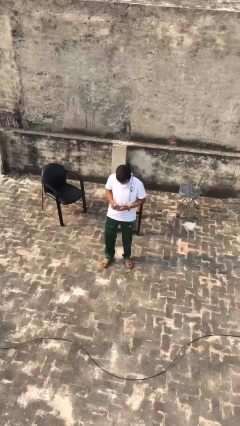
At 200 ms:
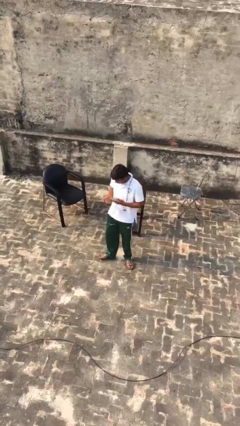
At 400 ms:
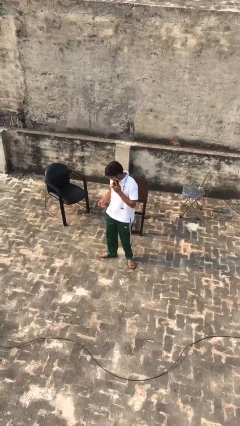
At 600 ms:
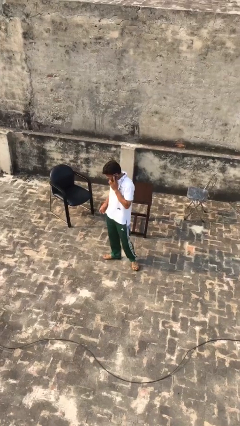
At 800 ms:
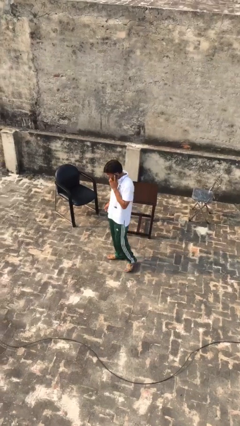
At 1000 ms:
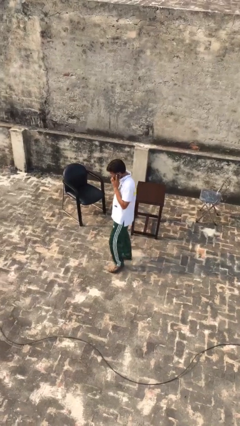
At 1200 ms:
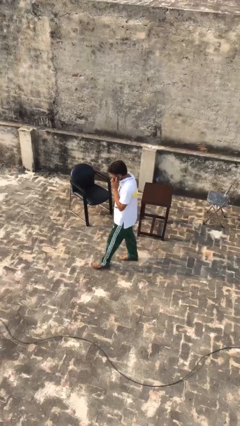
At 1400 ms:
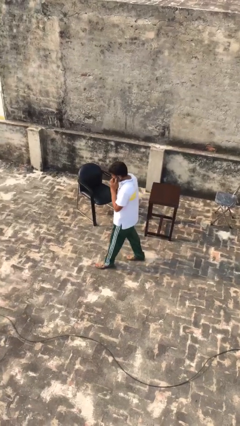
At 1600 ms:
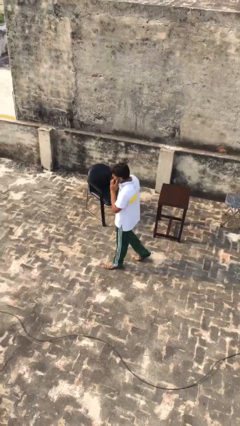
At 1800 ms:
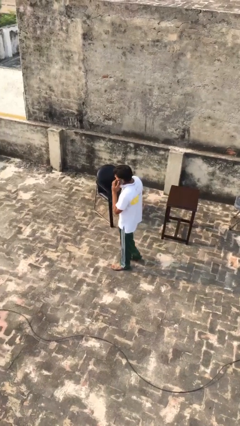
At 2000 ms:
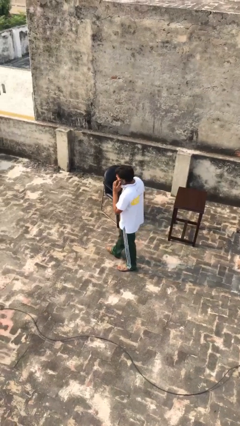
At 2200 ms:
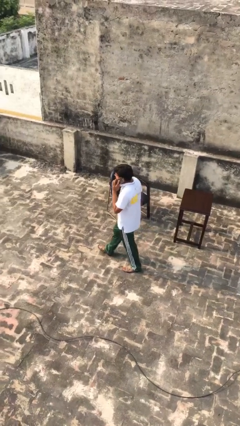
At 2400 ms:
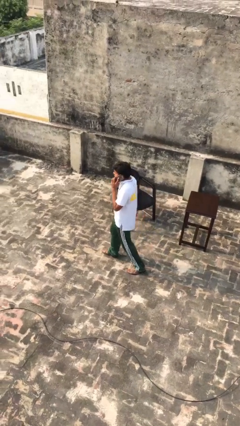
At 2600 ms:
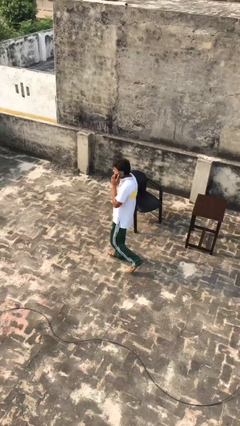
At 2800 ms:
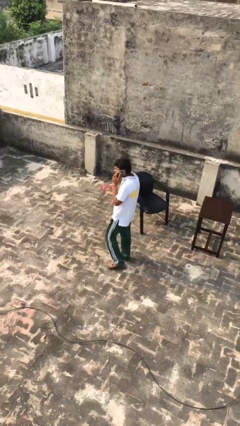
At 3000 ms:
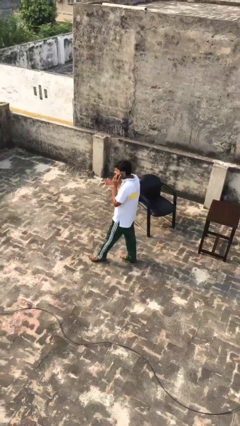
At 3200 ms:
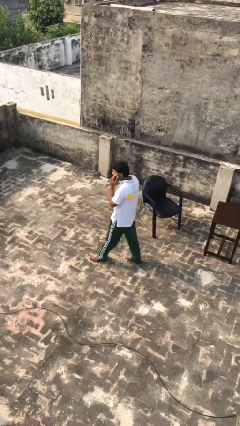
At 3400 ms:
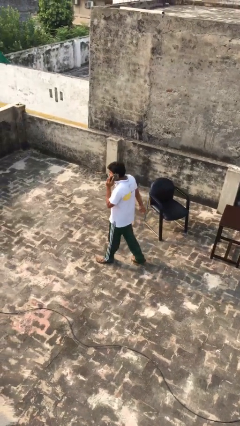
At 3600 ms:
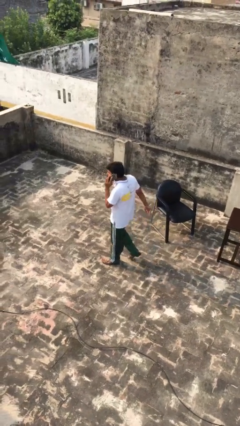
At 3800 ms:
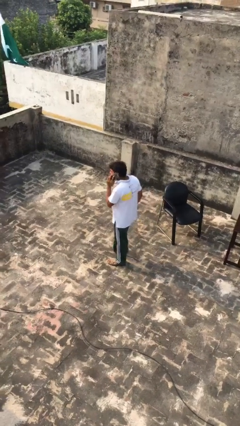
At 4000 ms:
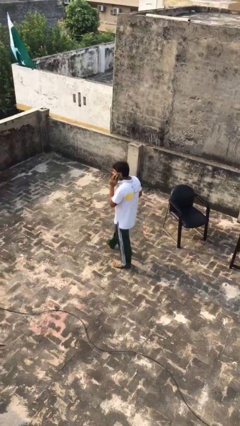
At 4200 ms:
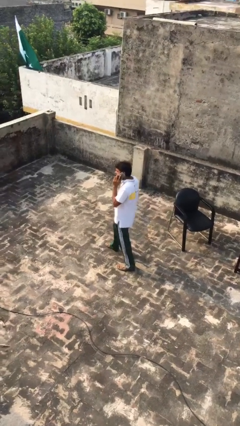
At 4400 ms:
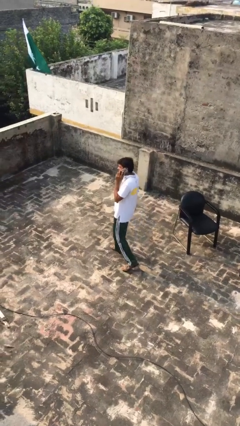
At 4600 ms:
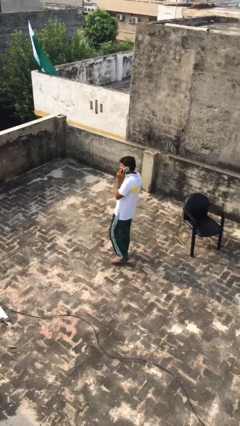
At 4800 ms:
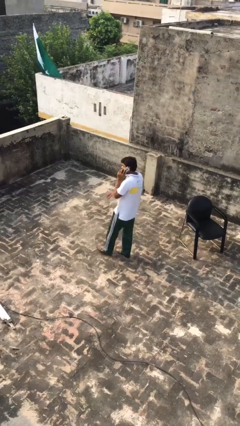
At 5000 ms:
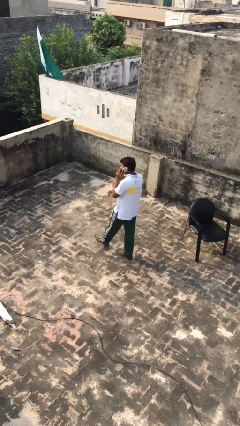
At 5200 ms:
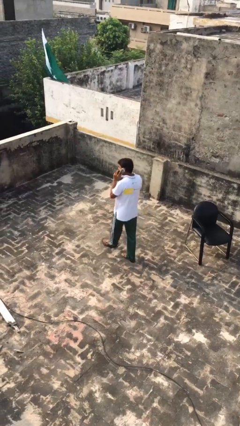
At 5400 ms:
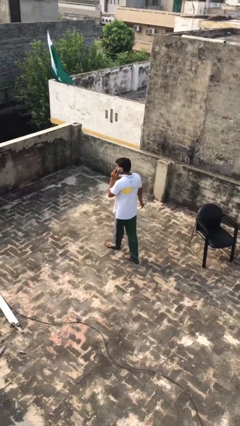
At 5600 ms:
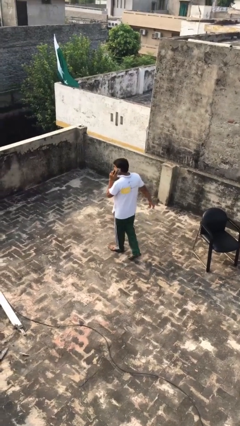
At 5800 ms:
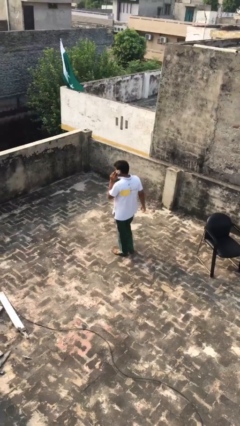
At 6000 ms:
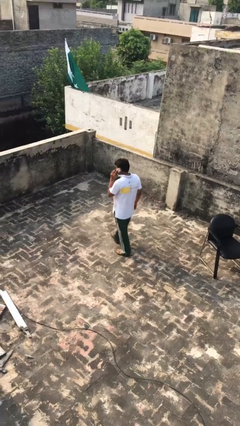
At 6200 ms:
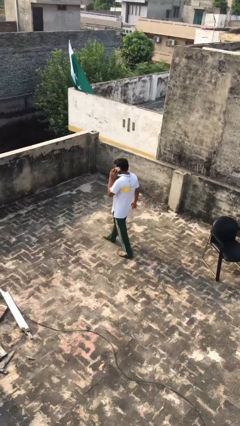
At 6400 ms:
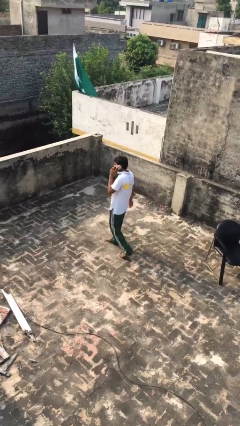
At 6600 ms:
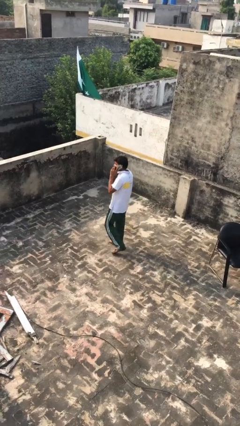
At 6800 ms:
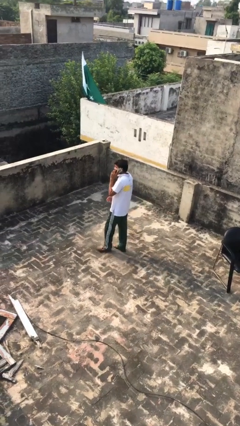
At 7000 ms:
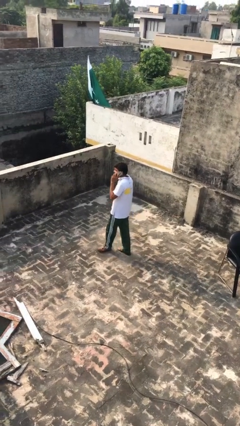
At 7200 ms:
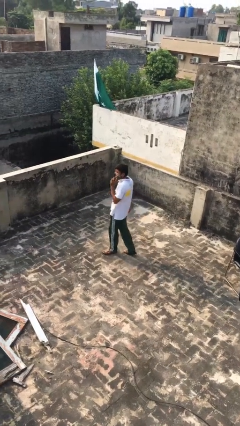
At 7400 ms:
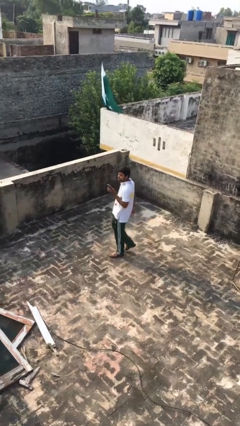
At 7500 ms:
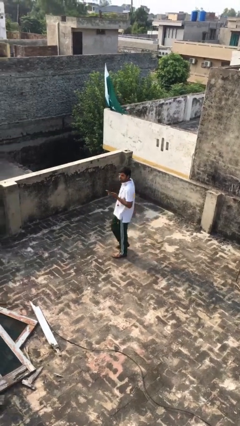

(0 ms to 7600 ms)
person talks on phone

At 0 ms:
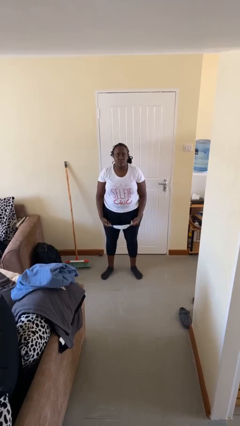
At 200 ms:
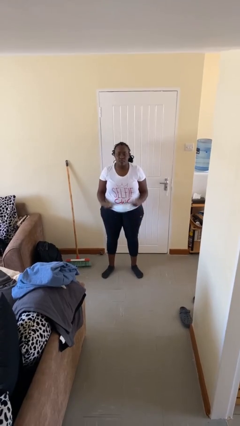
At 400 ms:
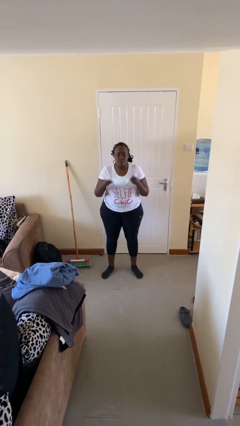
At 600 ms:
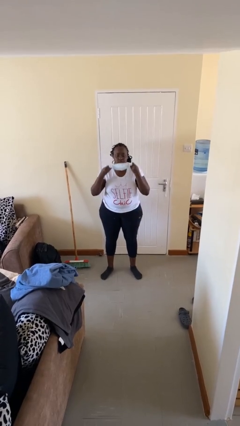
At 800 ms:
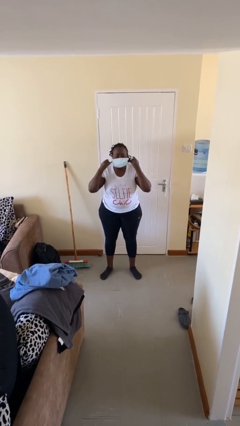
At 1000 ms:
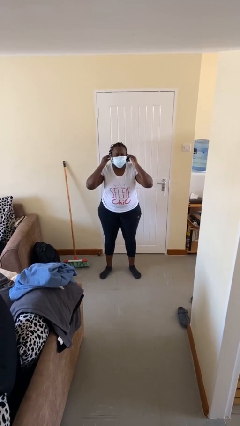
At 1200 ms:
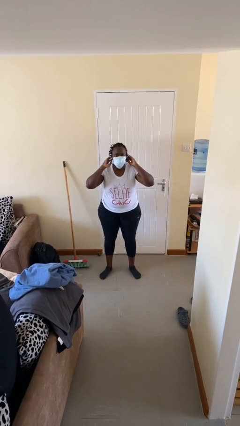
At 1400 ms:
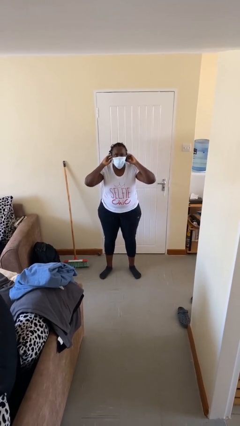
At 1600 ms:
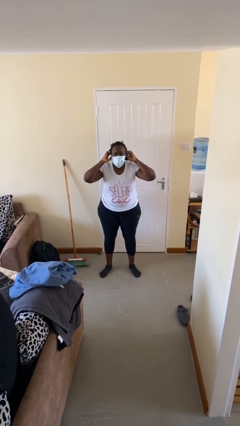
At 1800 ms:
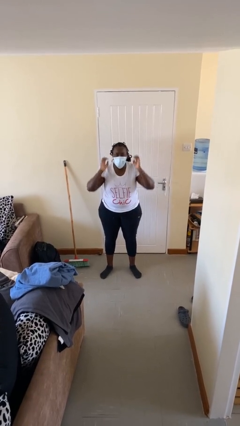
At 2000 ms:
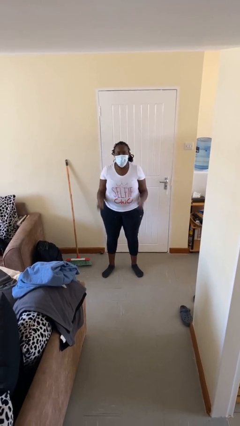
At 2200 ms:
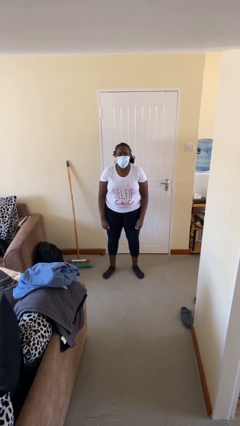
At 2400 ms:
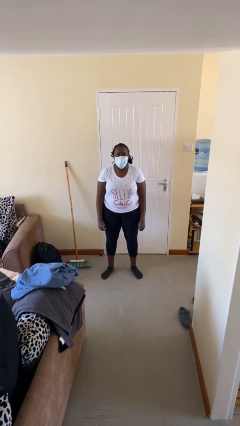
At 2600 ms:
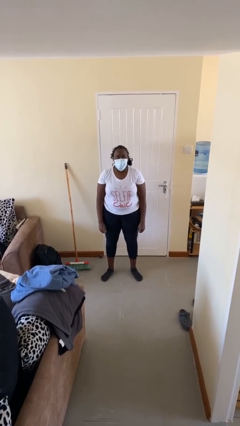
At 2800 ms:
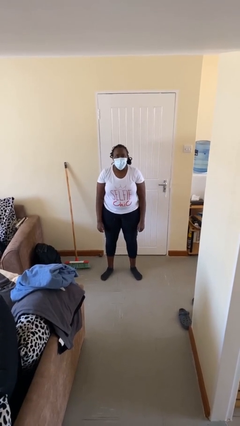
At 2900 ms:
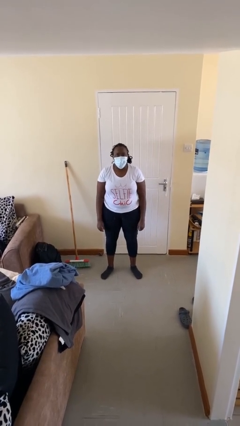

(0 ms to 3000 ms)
person puts on facemask

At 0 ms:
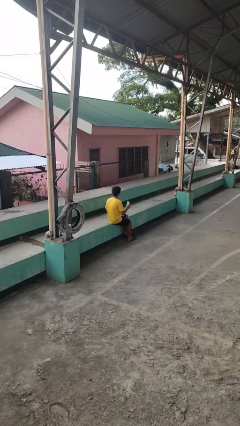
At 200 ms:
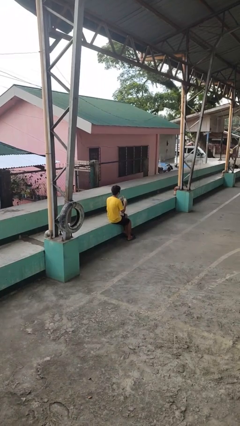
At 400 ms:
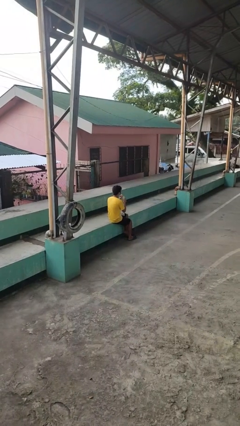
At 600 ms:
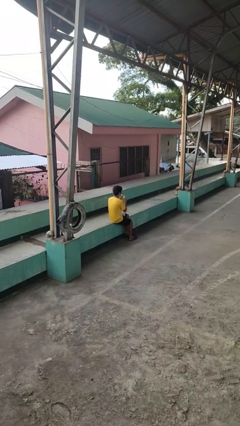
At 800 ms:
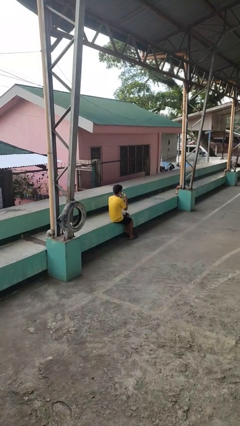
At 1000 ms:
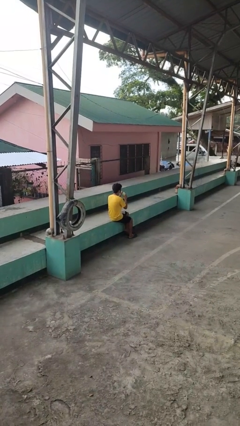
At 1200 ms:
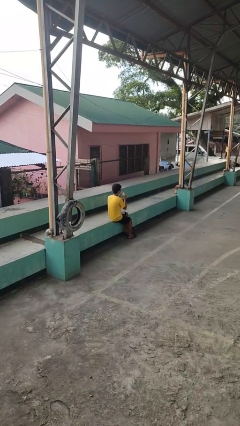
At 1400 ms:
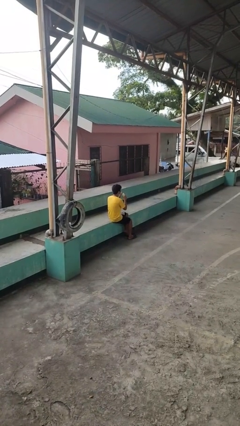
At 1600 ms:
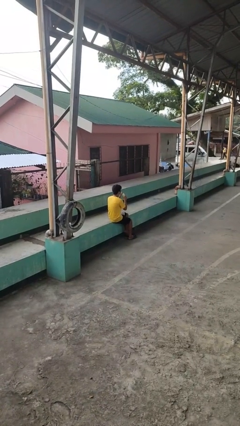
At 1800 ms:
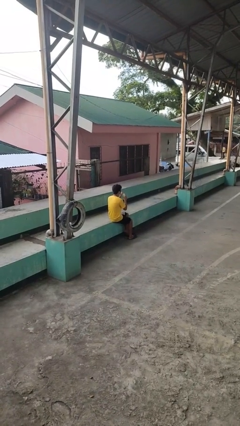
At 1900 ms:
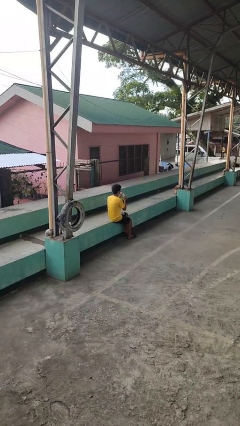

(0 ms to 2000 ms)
person drinks from straw

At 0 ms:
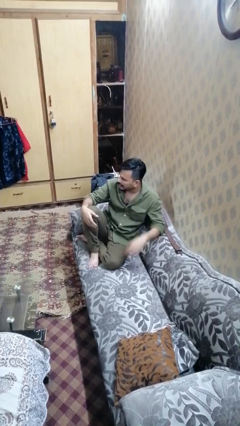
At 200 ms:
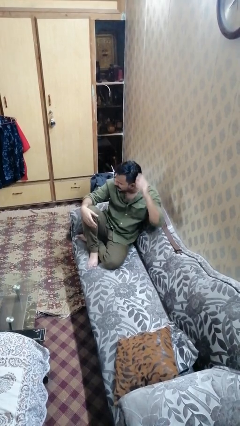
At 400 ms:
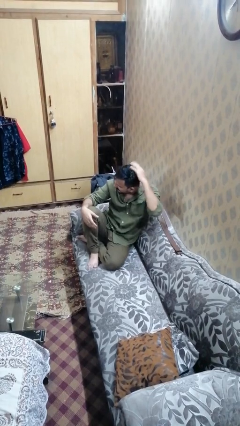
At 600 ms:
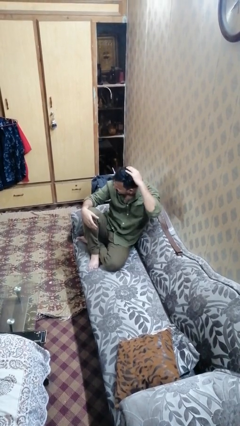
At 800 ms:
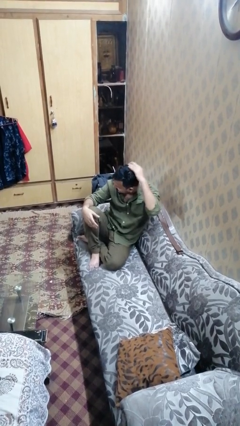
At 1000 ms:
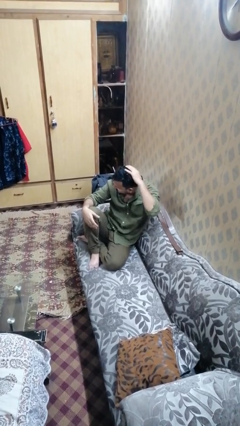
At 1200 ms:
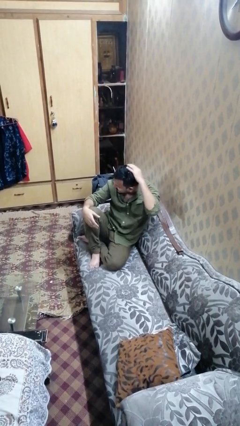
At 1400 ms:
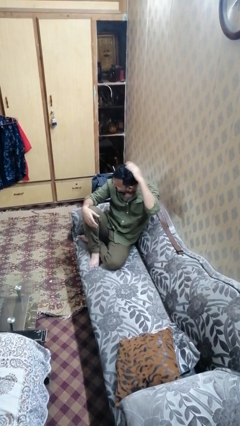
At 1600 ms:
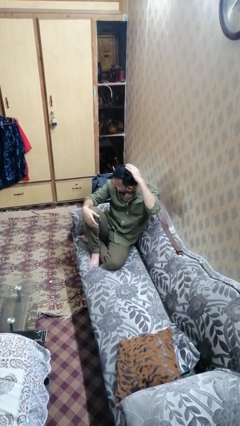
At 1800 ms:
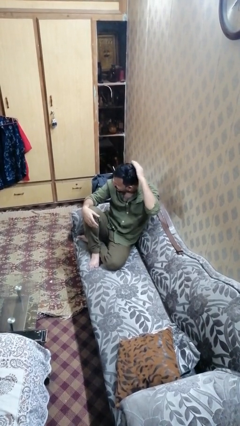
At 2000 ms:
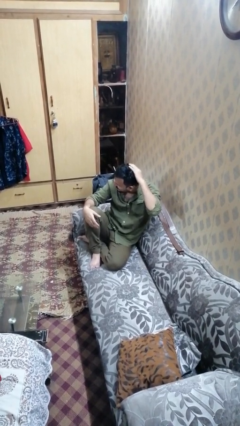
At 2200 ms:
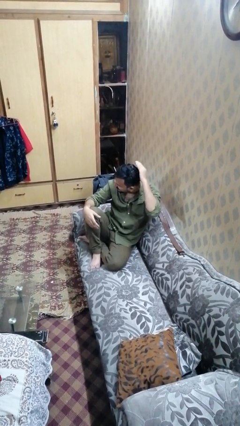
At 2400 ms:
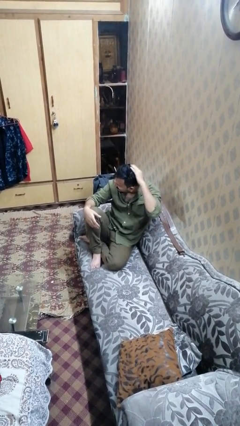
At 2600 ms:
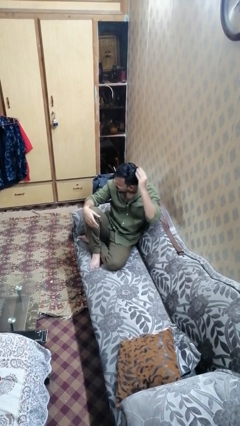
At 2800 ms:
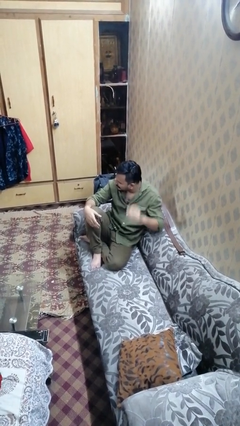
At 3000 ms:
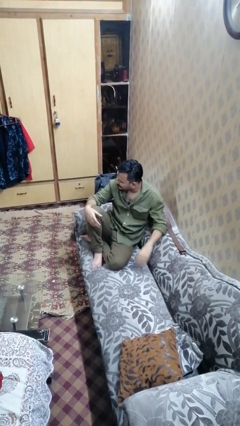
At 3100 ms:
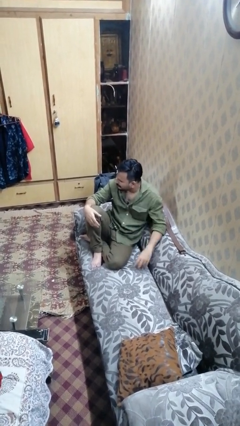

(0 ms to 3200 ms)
person pats head

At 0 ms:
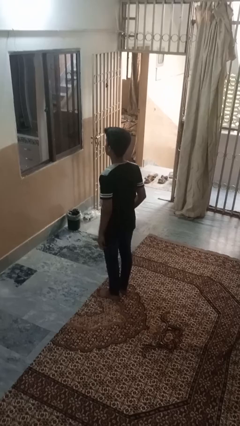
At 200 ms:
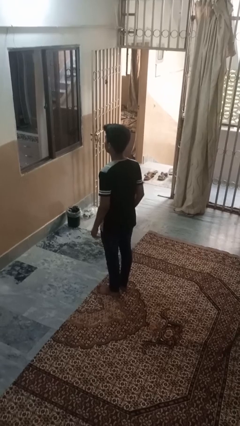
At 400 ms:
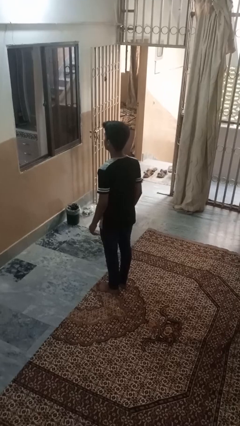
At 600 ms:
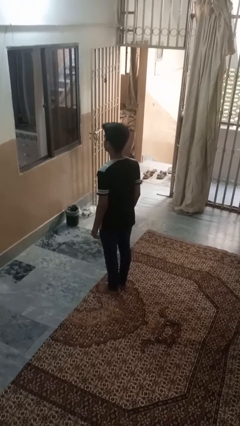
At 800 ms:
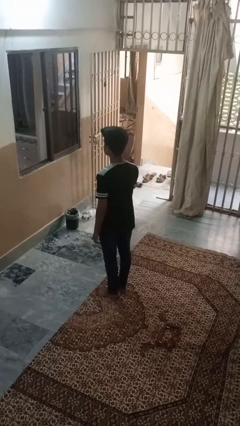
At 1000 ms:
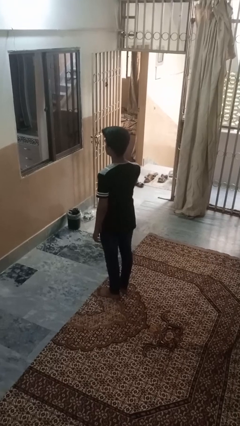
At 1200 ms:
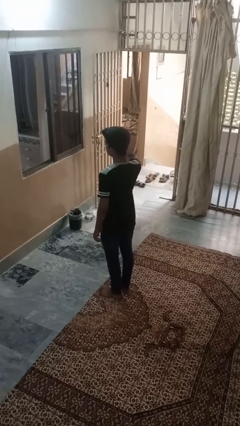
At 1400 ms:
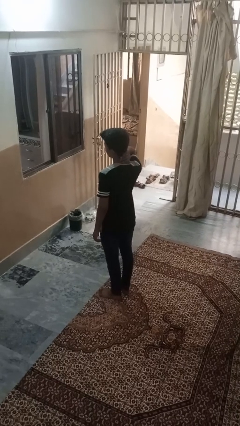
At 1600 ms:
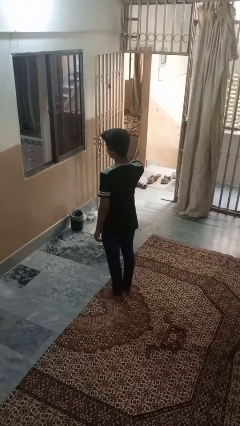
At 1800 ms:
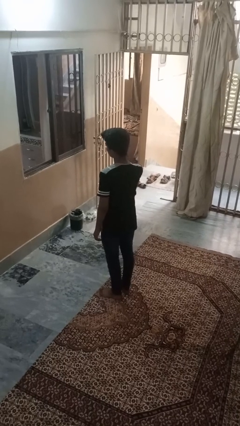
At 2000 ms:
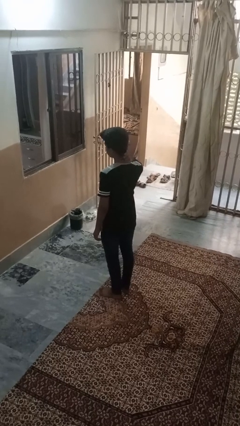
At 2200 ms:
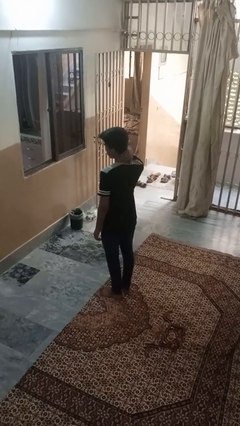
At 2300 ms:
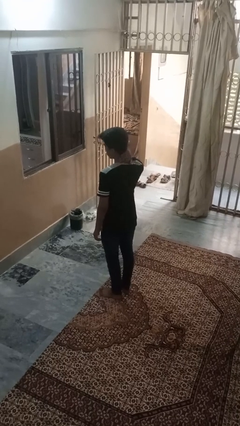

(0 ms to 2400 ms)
person rubs neck
